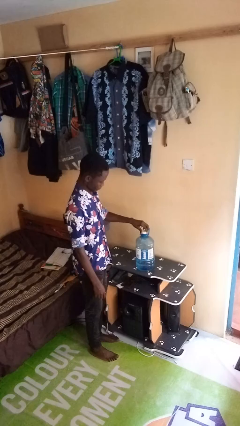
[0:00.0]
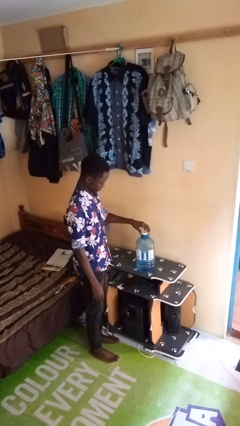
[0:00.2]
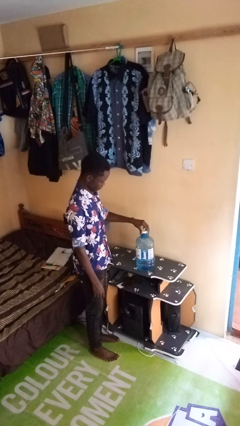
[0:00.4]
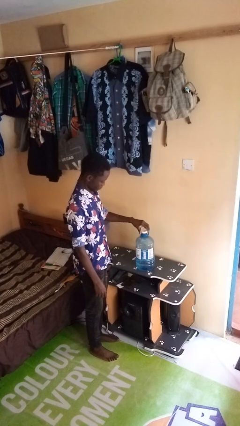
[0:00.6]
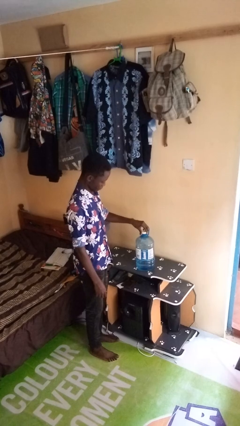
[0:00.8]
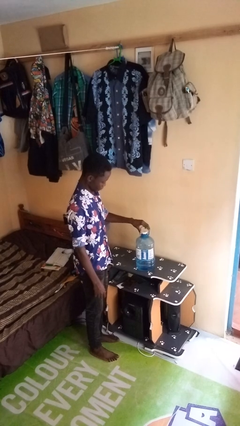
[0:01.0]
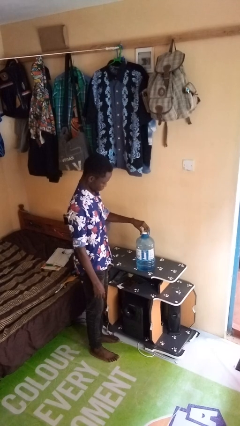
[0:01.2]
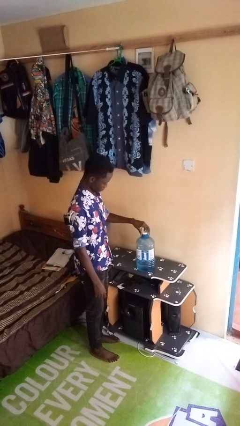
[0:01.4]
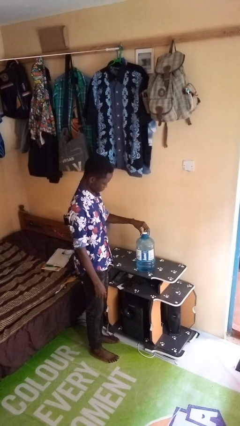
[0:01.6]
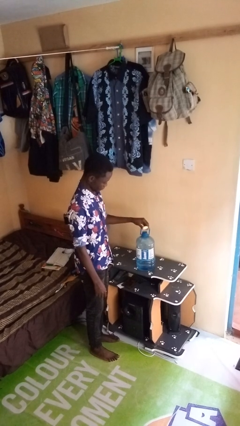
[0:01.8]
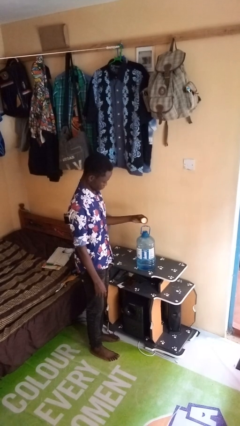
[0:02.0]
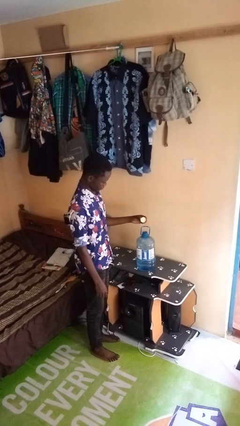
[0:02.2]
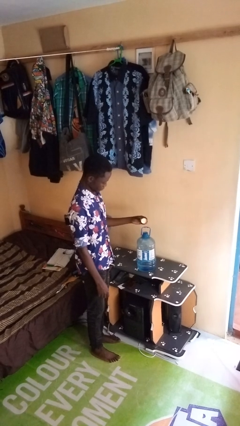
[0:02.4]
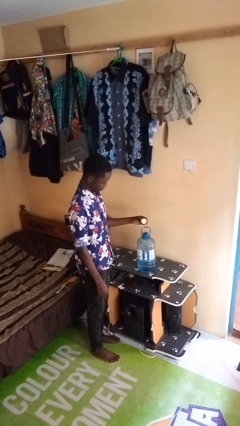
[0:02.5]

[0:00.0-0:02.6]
person unscrews lid from bottle

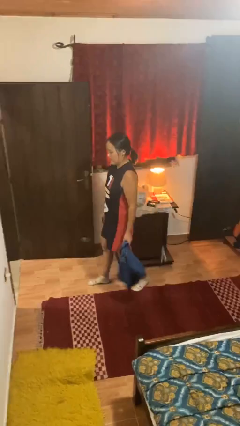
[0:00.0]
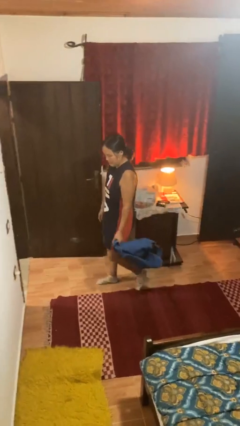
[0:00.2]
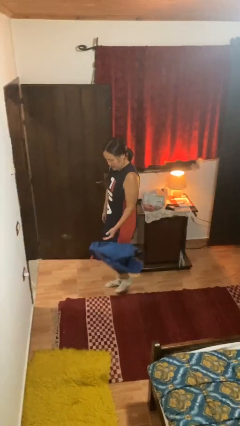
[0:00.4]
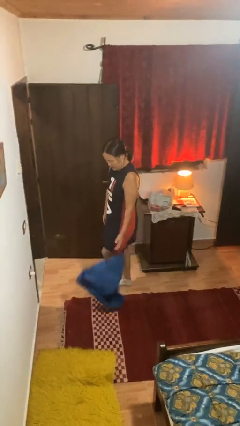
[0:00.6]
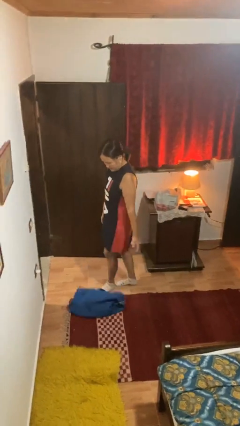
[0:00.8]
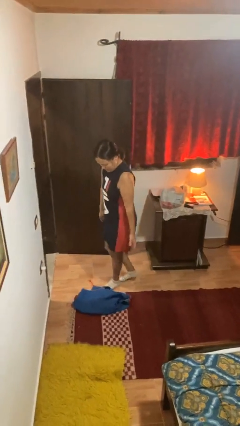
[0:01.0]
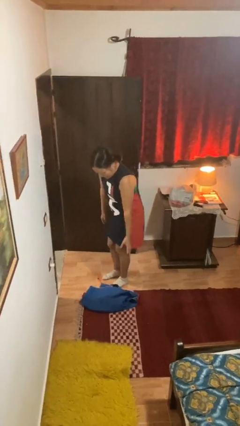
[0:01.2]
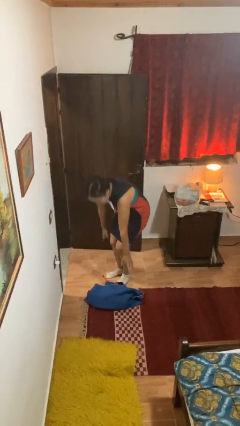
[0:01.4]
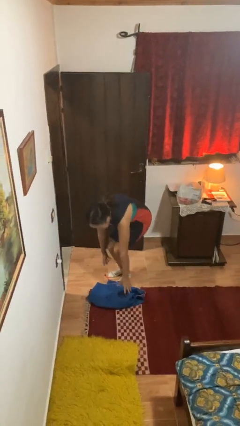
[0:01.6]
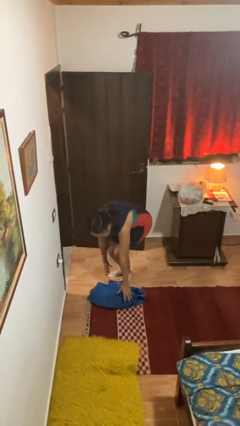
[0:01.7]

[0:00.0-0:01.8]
person drops object

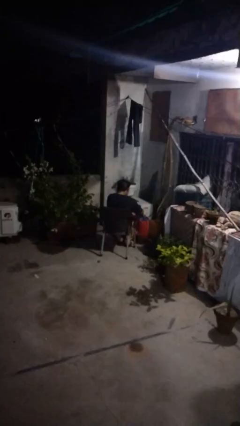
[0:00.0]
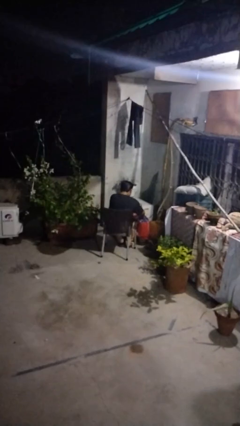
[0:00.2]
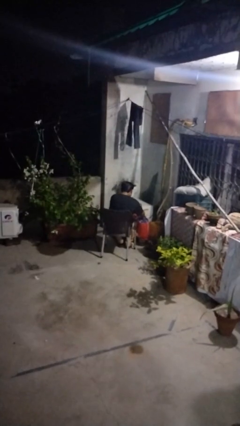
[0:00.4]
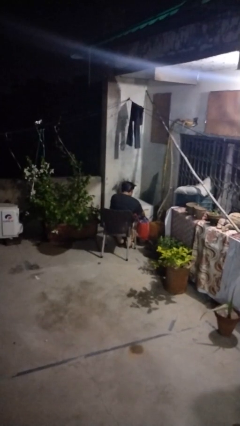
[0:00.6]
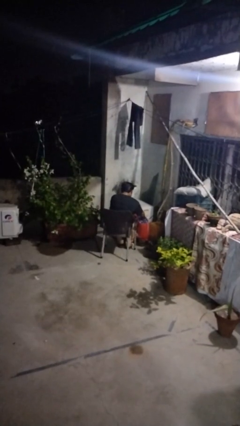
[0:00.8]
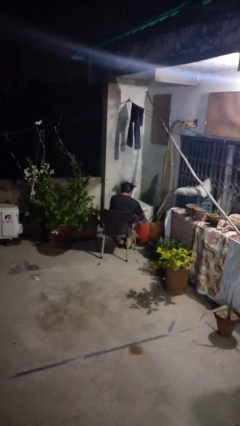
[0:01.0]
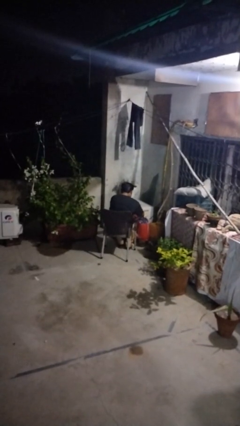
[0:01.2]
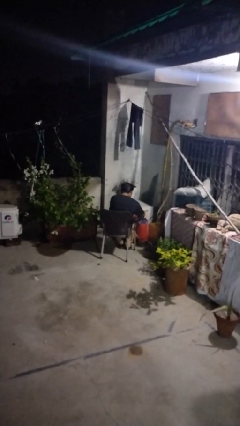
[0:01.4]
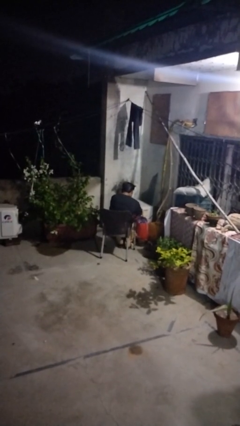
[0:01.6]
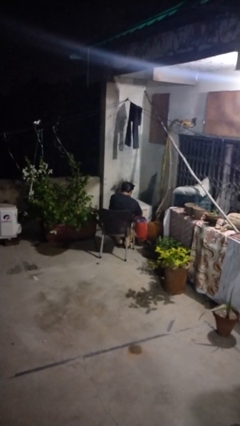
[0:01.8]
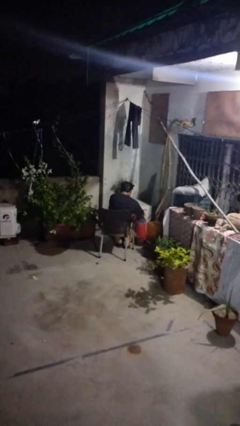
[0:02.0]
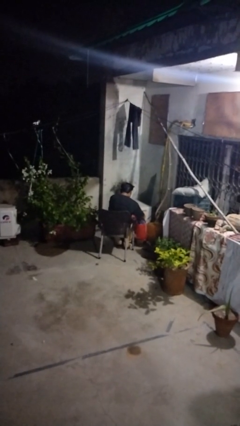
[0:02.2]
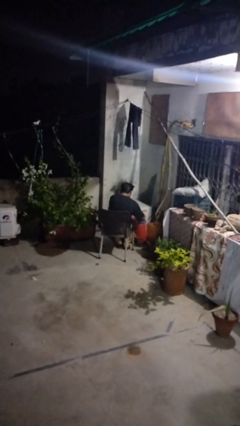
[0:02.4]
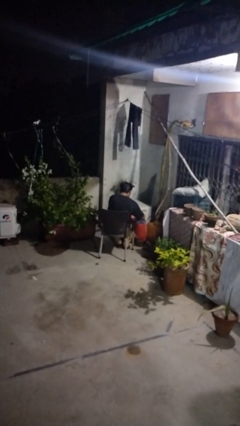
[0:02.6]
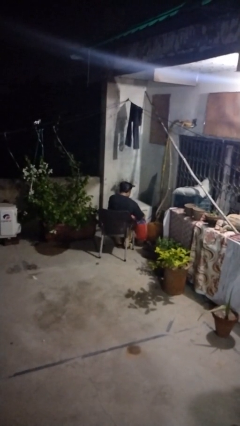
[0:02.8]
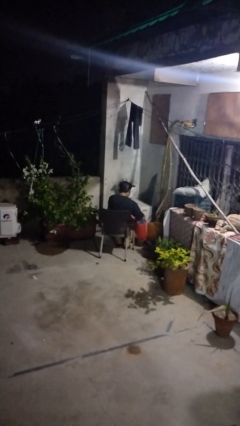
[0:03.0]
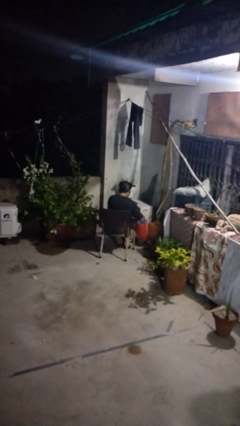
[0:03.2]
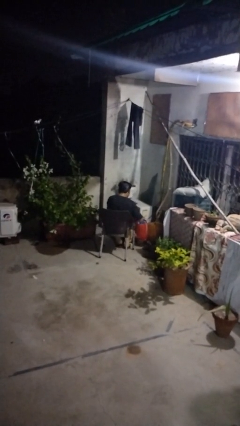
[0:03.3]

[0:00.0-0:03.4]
person searches in bag

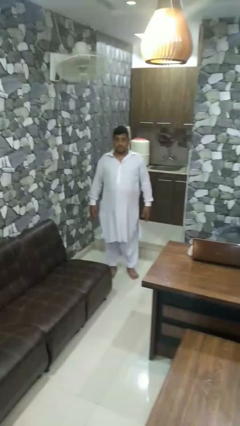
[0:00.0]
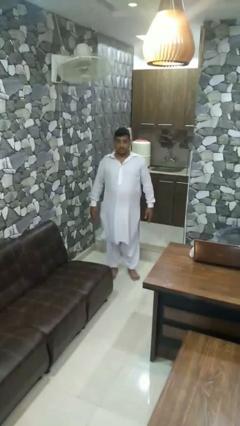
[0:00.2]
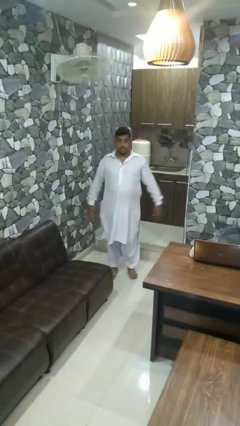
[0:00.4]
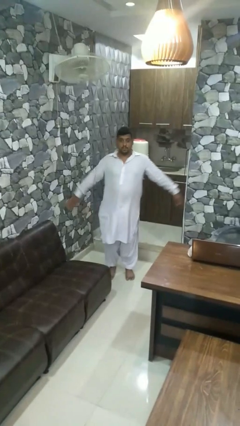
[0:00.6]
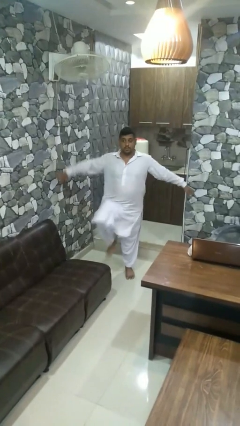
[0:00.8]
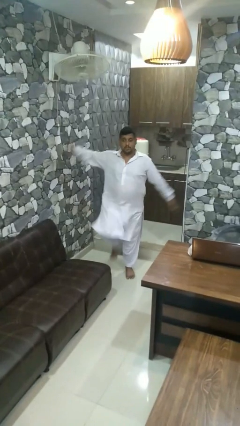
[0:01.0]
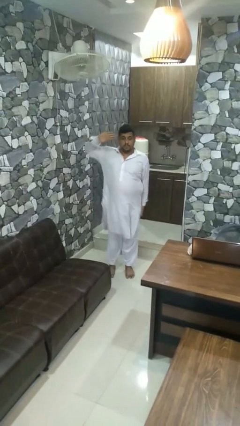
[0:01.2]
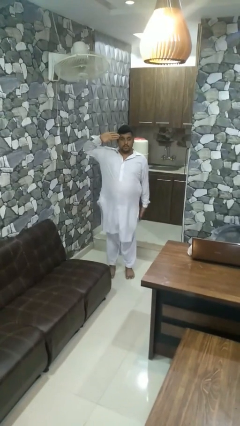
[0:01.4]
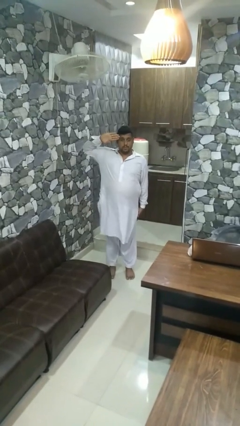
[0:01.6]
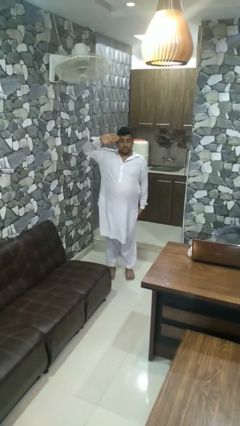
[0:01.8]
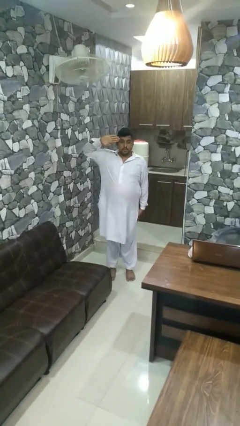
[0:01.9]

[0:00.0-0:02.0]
person salutes

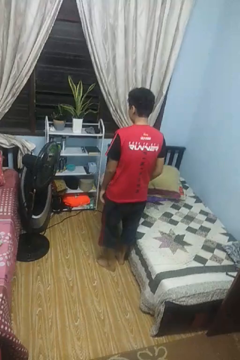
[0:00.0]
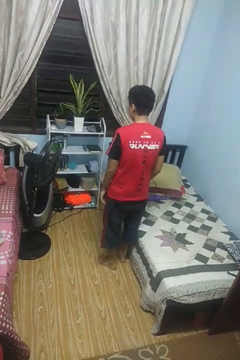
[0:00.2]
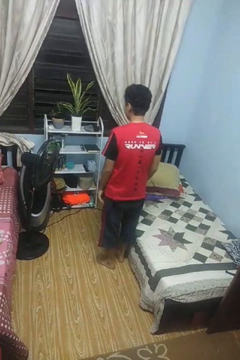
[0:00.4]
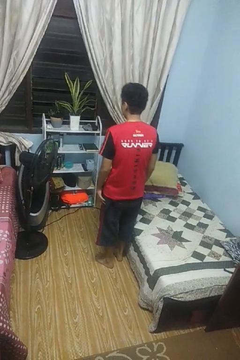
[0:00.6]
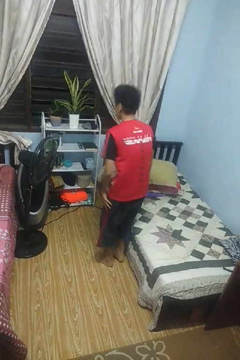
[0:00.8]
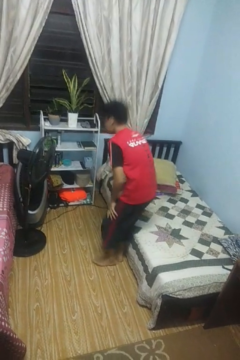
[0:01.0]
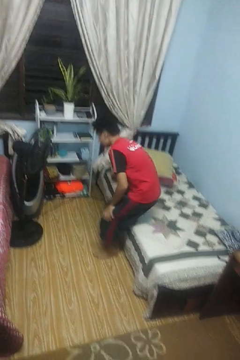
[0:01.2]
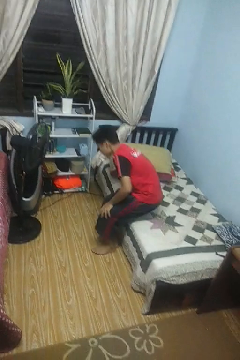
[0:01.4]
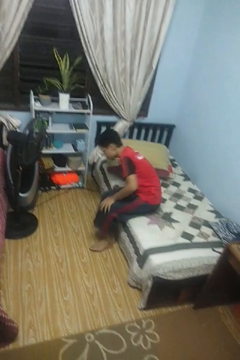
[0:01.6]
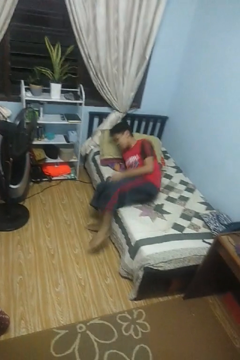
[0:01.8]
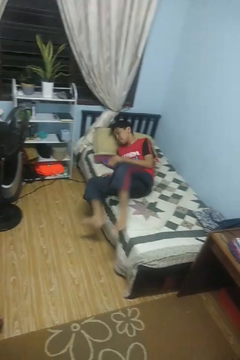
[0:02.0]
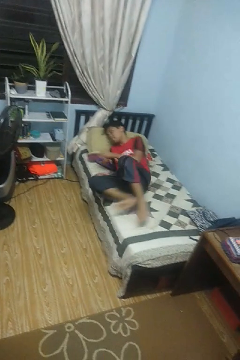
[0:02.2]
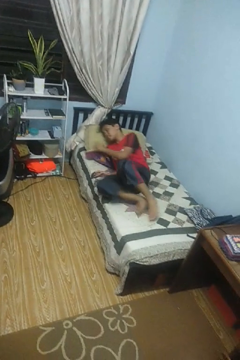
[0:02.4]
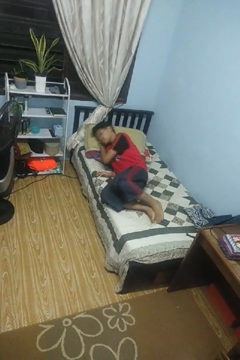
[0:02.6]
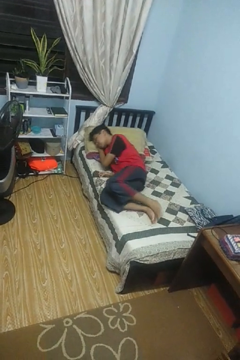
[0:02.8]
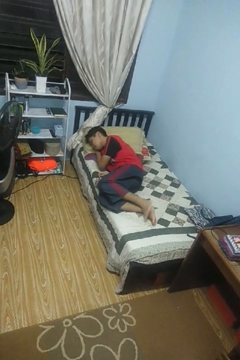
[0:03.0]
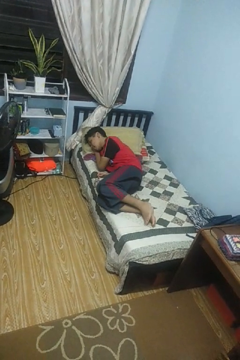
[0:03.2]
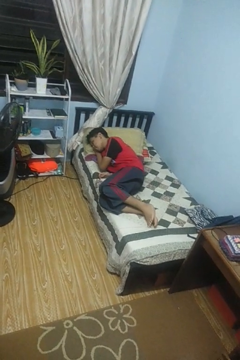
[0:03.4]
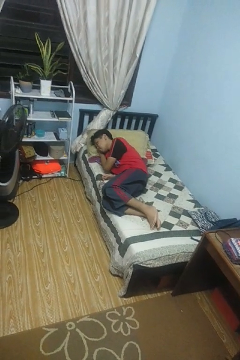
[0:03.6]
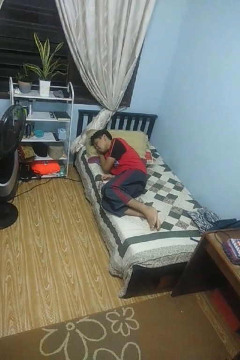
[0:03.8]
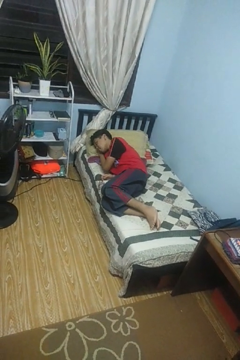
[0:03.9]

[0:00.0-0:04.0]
person lies down on bed

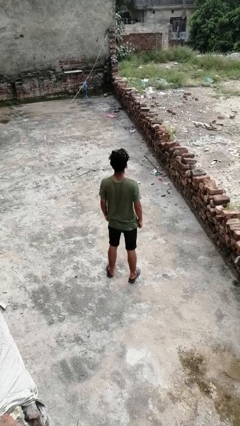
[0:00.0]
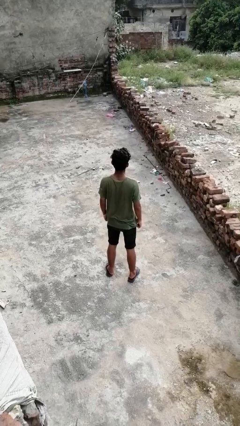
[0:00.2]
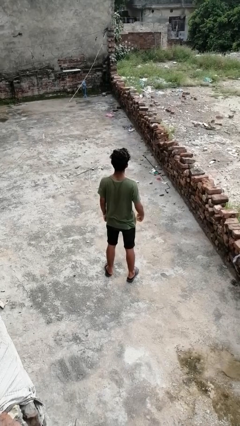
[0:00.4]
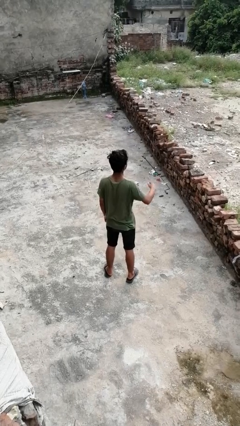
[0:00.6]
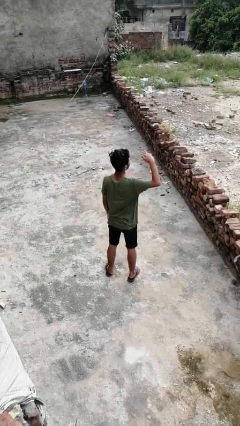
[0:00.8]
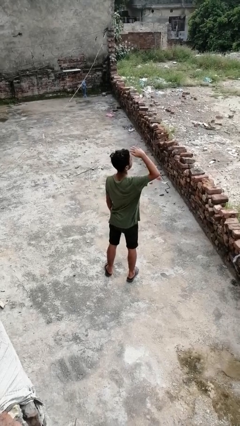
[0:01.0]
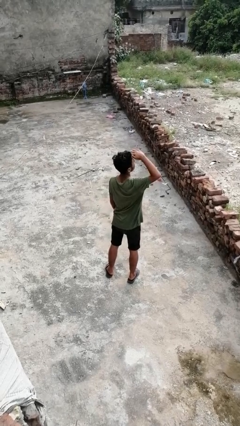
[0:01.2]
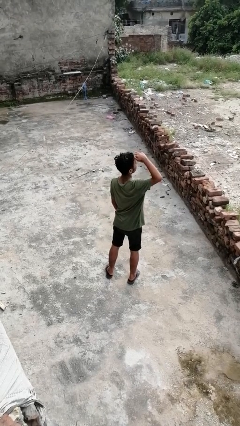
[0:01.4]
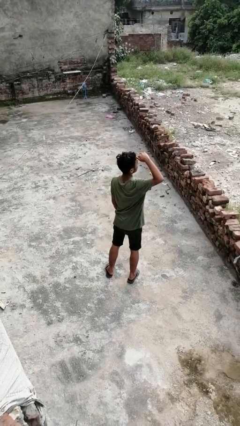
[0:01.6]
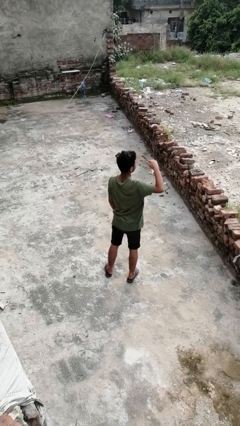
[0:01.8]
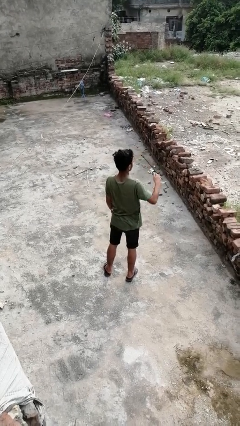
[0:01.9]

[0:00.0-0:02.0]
person shades eyes

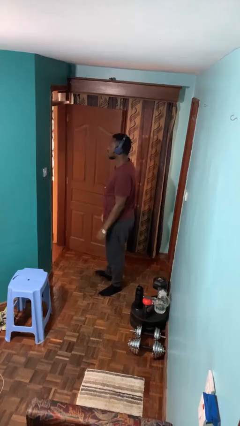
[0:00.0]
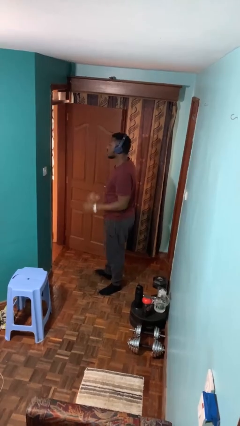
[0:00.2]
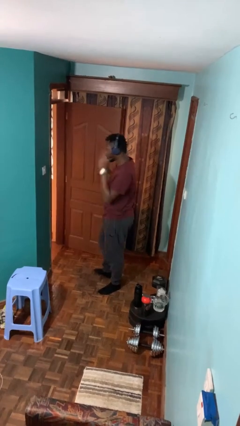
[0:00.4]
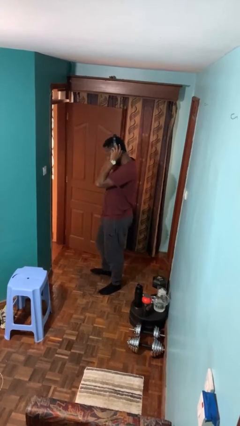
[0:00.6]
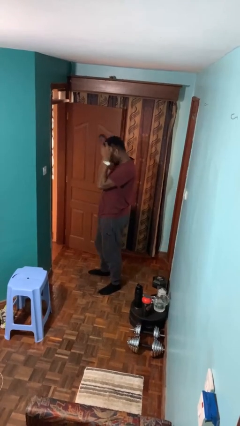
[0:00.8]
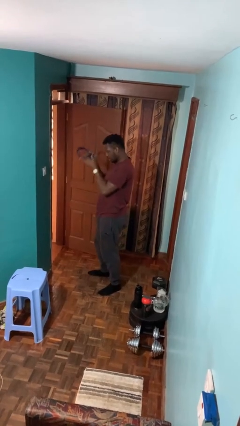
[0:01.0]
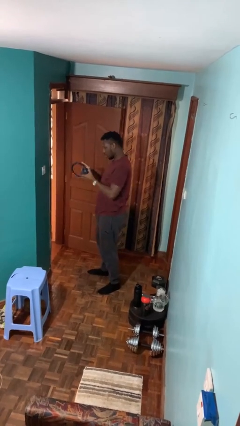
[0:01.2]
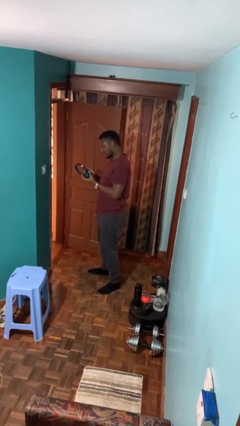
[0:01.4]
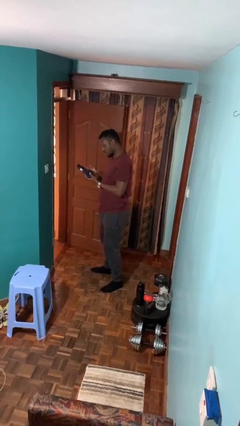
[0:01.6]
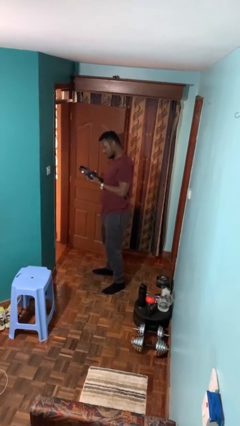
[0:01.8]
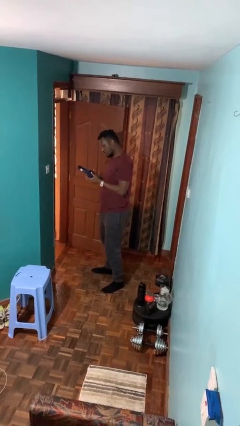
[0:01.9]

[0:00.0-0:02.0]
person takes off headphones
